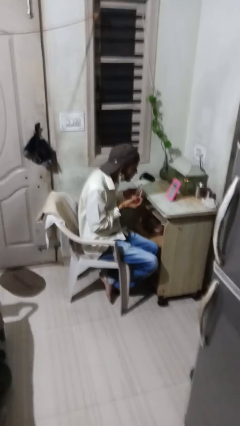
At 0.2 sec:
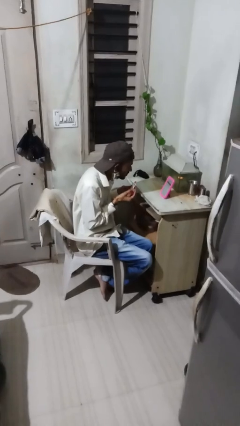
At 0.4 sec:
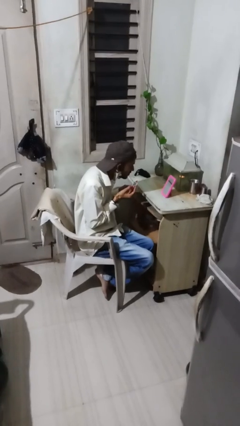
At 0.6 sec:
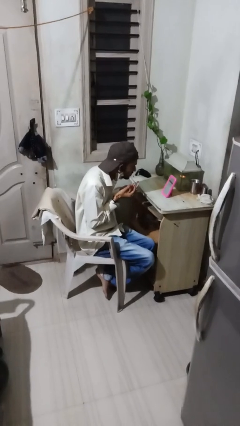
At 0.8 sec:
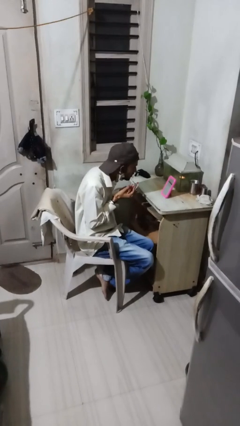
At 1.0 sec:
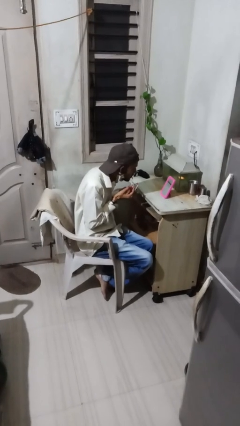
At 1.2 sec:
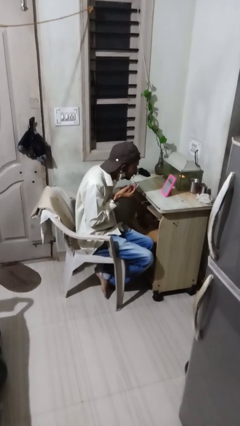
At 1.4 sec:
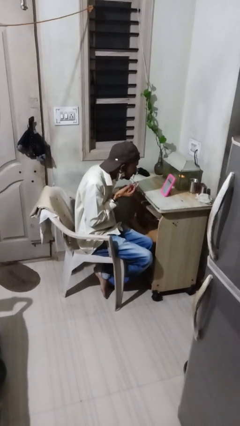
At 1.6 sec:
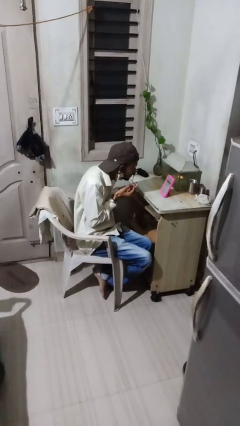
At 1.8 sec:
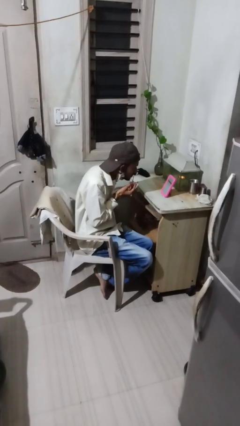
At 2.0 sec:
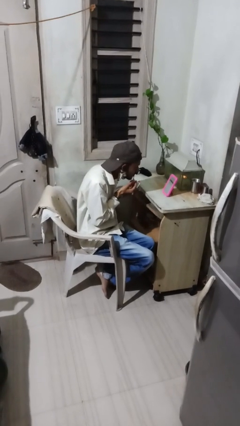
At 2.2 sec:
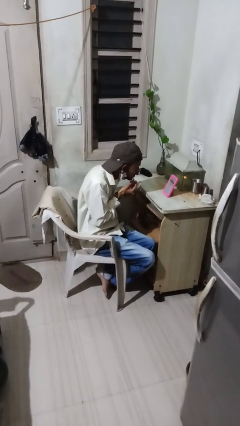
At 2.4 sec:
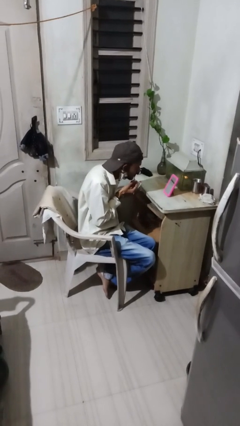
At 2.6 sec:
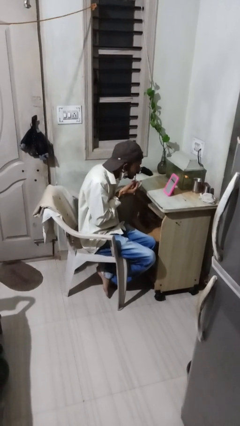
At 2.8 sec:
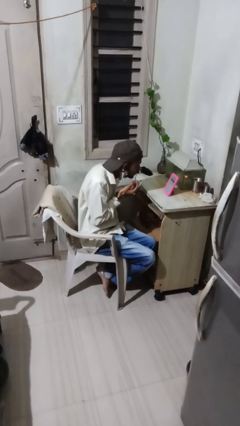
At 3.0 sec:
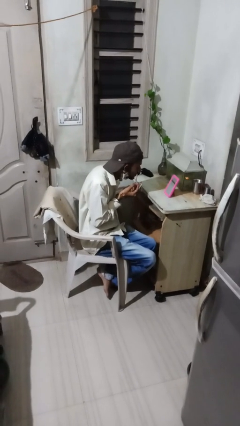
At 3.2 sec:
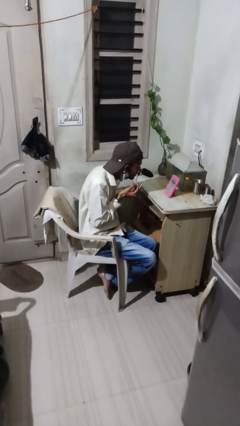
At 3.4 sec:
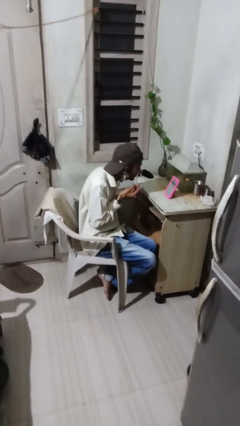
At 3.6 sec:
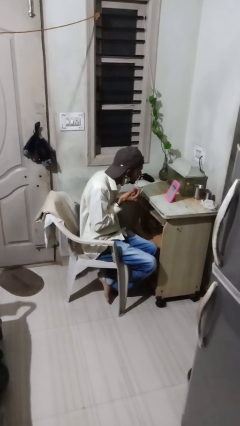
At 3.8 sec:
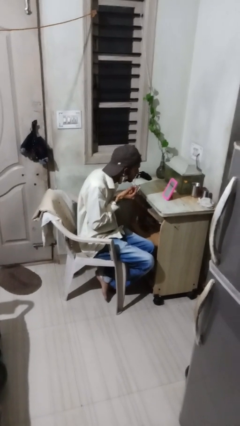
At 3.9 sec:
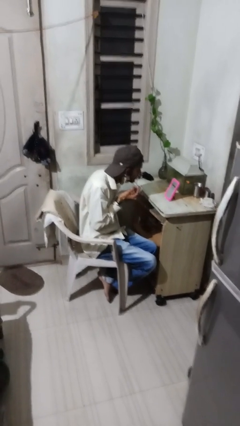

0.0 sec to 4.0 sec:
person applies lip makeup

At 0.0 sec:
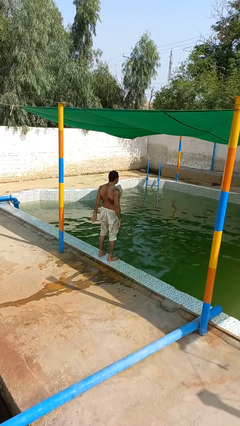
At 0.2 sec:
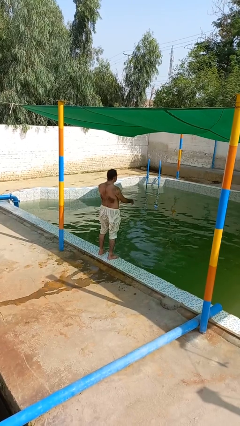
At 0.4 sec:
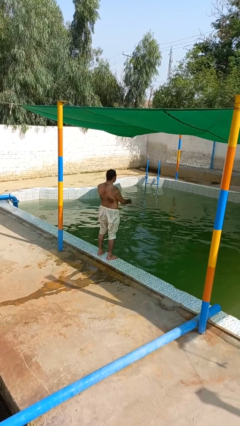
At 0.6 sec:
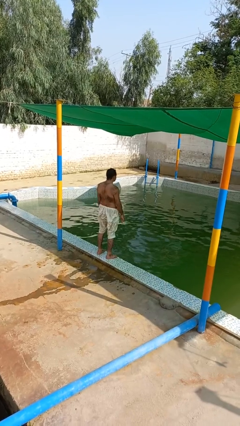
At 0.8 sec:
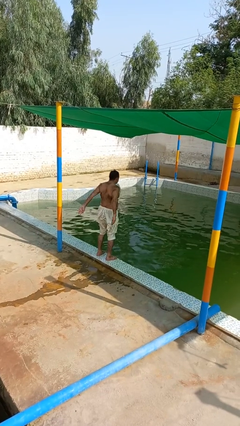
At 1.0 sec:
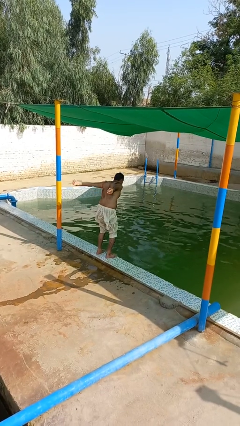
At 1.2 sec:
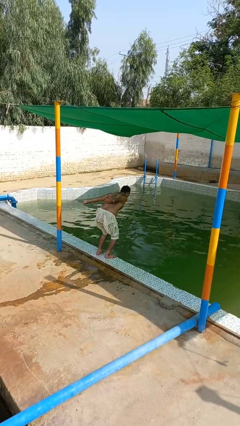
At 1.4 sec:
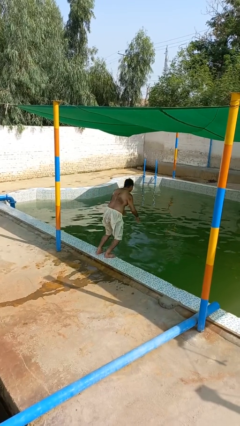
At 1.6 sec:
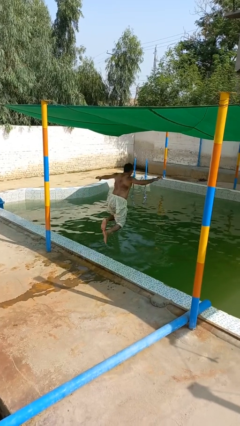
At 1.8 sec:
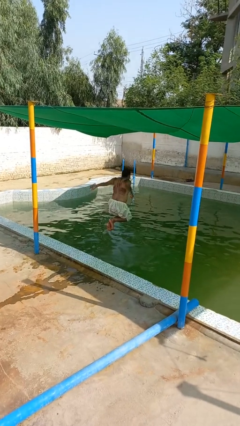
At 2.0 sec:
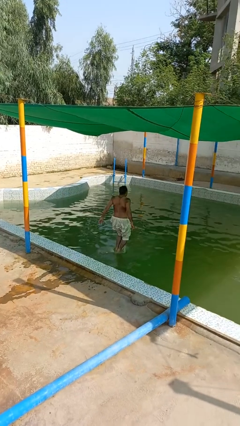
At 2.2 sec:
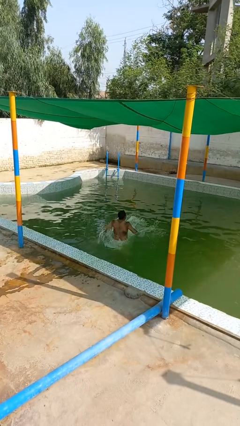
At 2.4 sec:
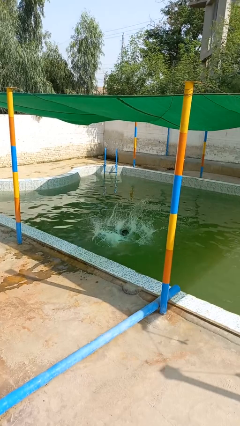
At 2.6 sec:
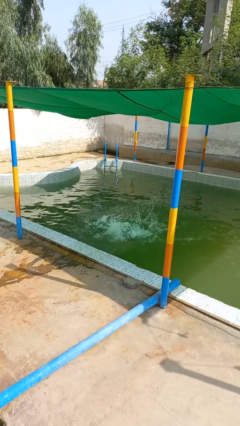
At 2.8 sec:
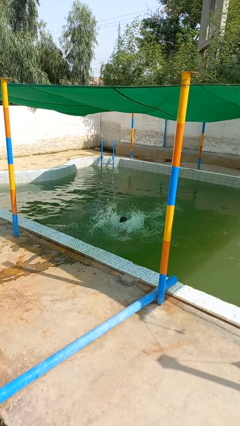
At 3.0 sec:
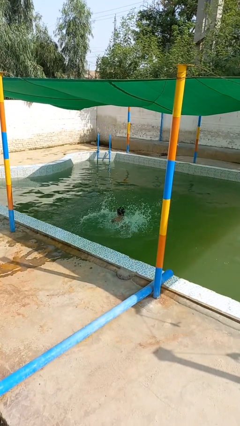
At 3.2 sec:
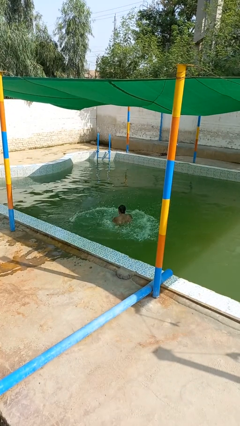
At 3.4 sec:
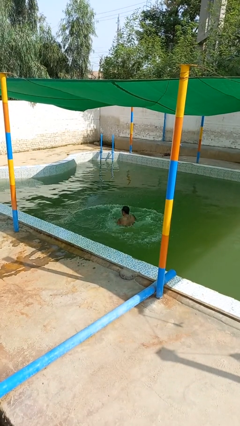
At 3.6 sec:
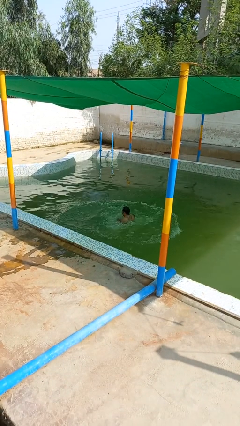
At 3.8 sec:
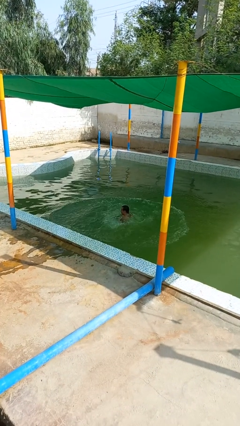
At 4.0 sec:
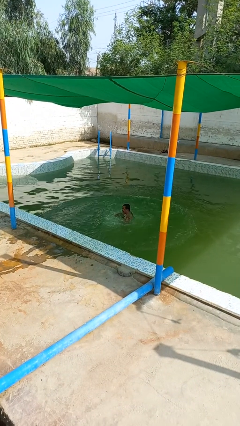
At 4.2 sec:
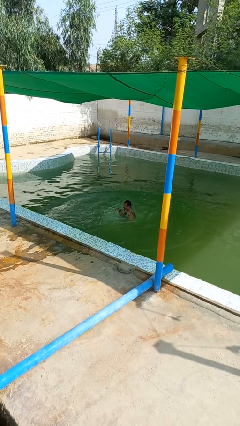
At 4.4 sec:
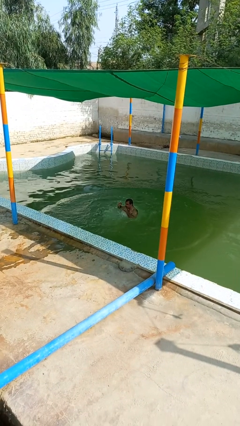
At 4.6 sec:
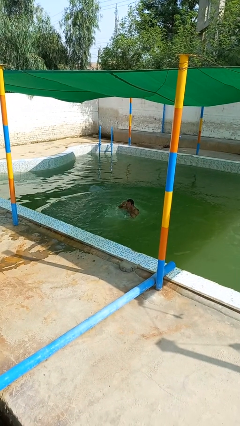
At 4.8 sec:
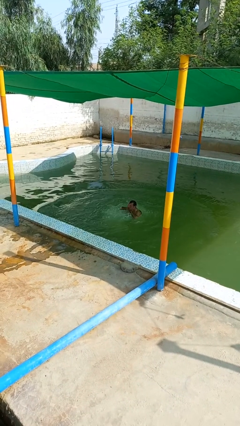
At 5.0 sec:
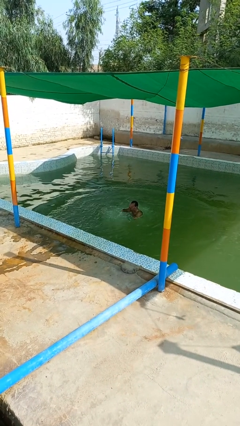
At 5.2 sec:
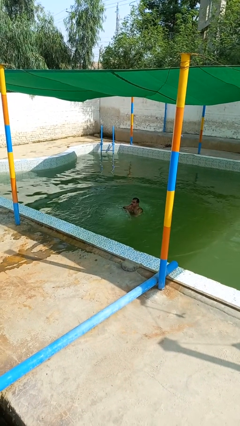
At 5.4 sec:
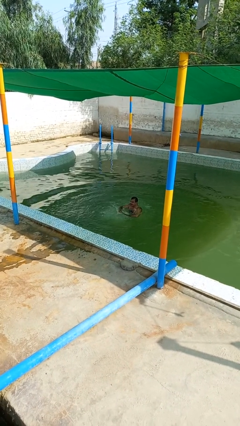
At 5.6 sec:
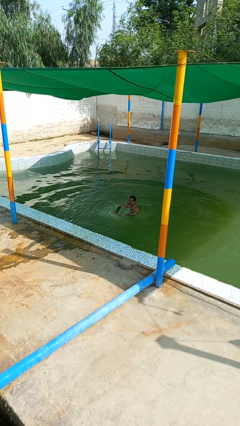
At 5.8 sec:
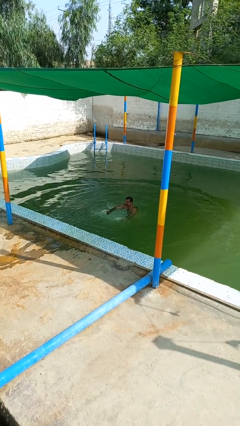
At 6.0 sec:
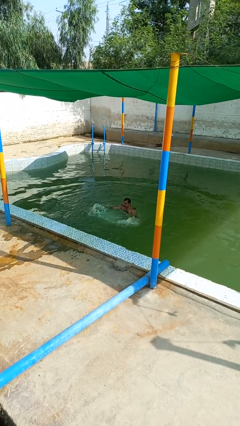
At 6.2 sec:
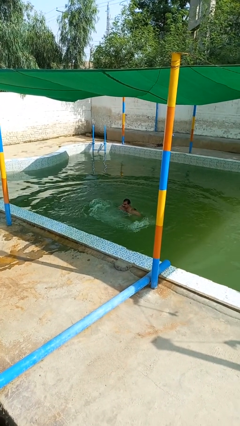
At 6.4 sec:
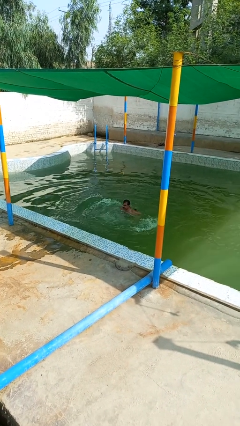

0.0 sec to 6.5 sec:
person jumps into pool

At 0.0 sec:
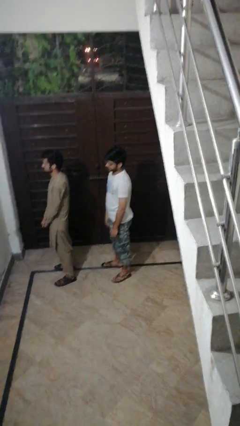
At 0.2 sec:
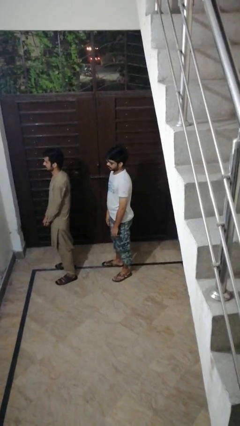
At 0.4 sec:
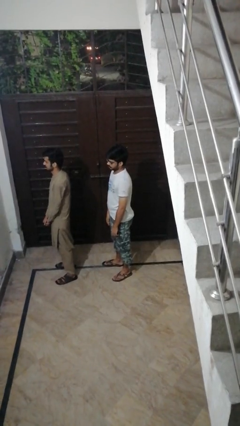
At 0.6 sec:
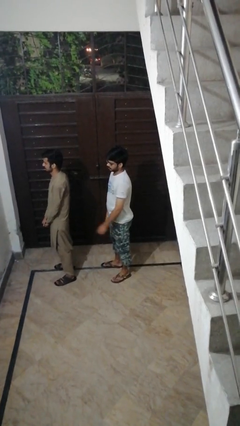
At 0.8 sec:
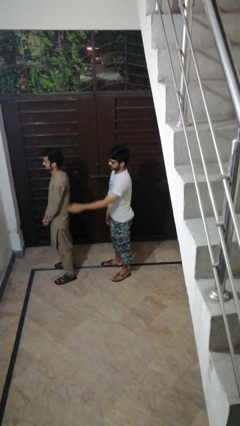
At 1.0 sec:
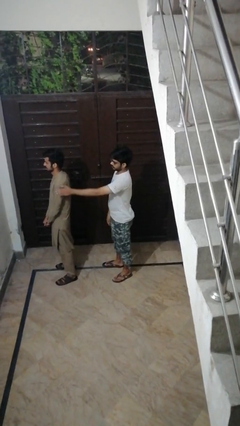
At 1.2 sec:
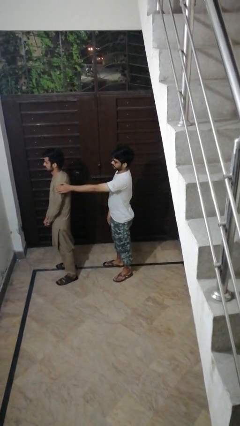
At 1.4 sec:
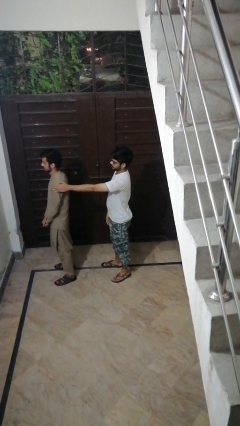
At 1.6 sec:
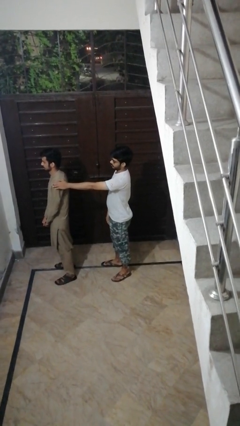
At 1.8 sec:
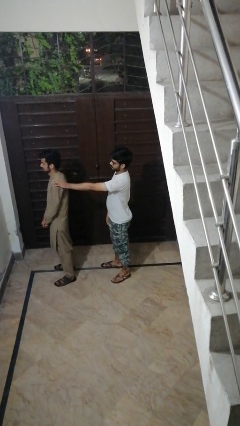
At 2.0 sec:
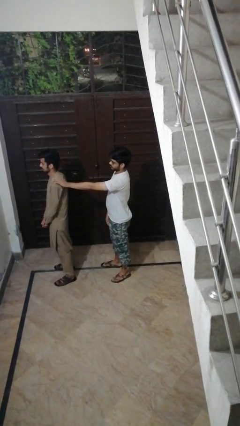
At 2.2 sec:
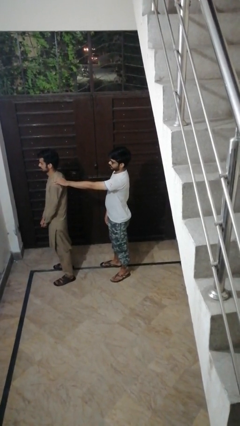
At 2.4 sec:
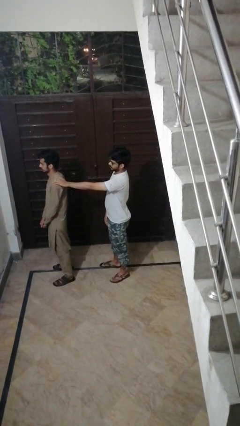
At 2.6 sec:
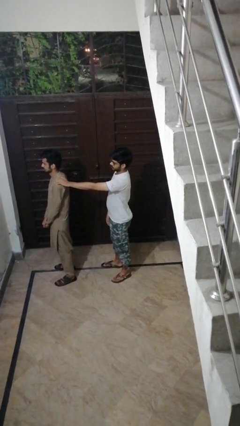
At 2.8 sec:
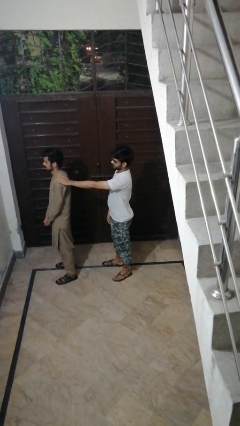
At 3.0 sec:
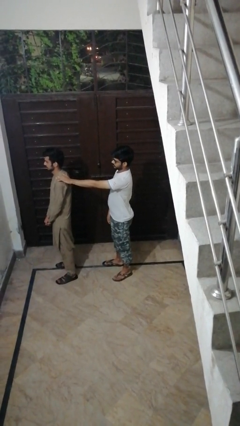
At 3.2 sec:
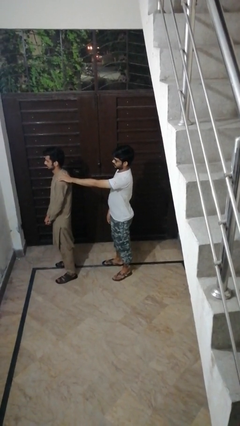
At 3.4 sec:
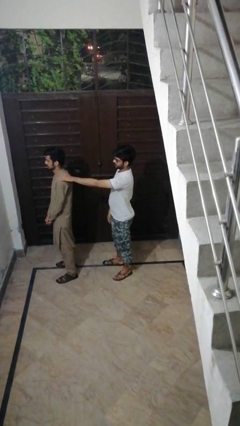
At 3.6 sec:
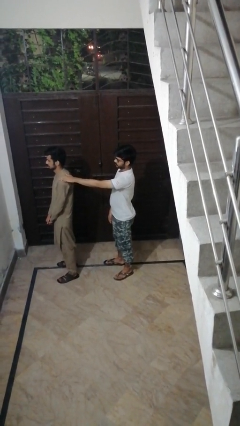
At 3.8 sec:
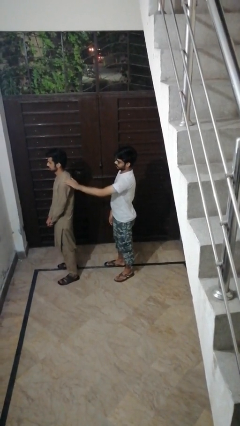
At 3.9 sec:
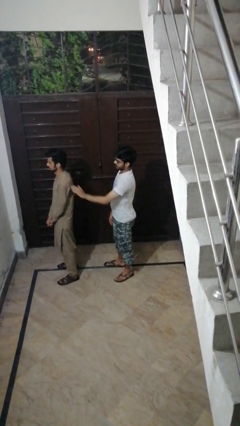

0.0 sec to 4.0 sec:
person touches back of person

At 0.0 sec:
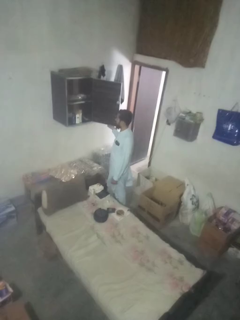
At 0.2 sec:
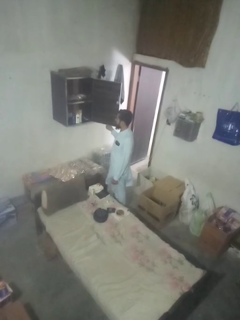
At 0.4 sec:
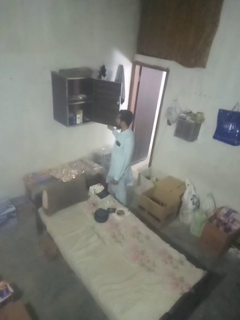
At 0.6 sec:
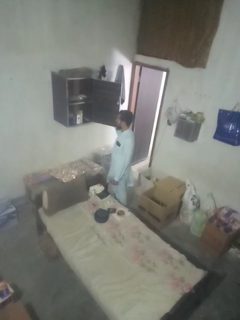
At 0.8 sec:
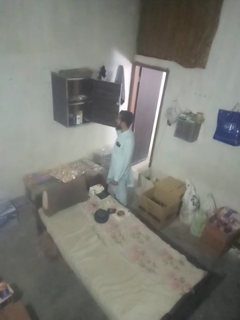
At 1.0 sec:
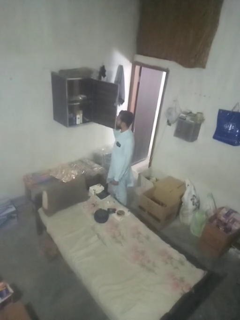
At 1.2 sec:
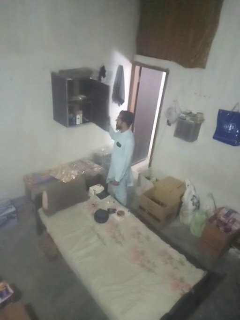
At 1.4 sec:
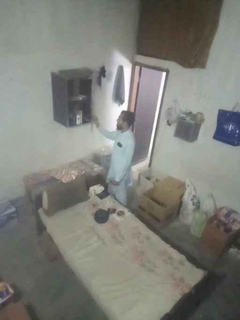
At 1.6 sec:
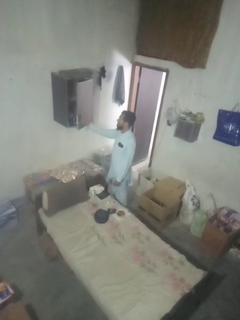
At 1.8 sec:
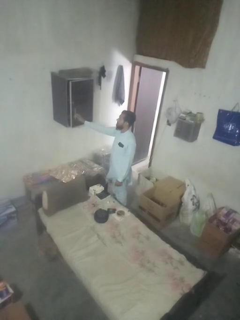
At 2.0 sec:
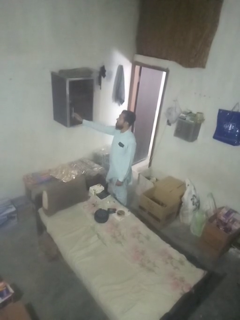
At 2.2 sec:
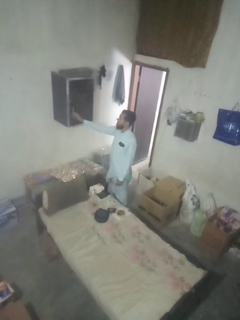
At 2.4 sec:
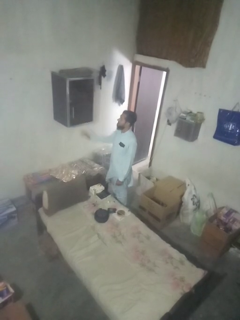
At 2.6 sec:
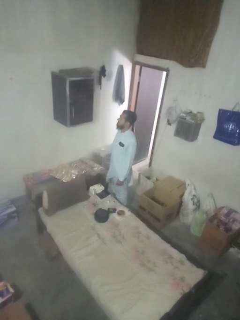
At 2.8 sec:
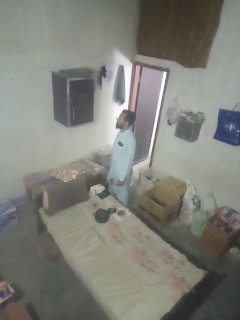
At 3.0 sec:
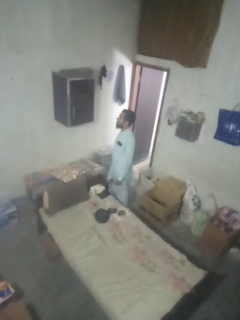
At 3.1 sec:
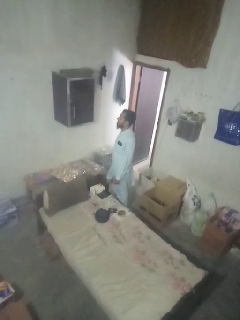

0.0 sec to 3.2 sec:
person closes dresser drawer

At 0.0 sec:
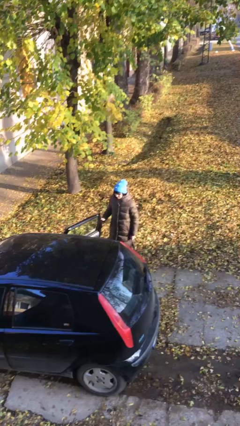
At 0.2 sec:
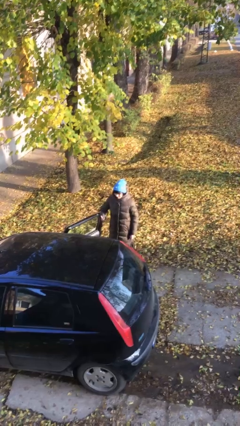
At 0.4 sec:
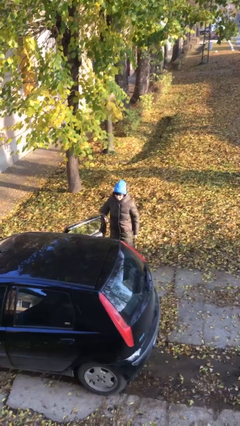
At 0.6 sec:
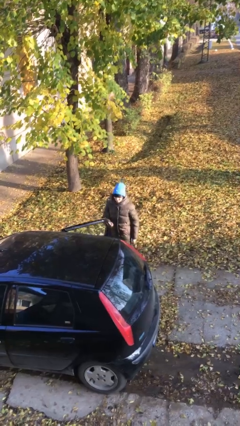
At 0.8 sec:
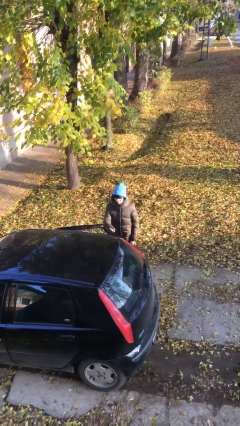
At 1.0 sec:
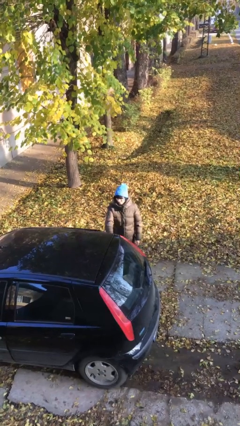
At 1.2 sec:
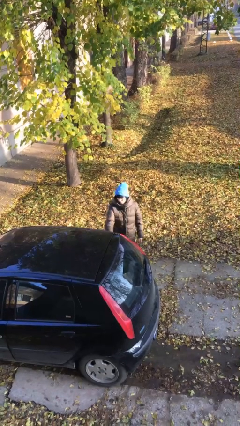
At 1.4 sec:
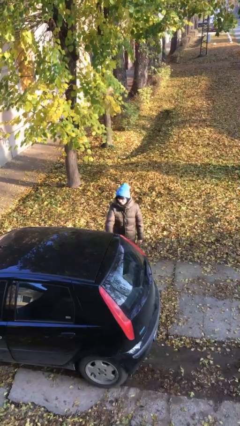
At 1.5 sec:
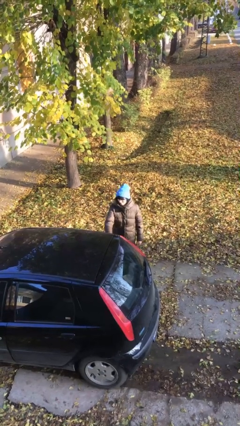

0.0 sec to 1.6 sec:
person closes car door
